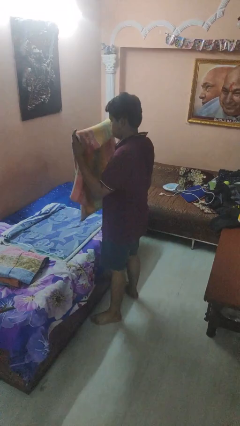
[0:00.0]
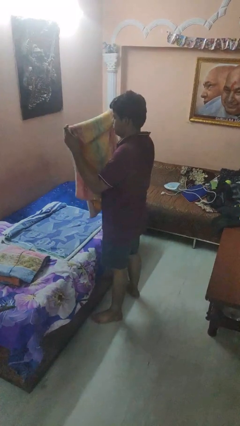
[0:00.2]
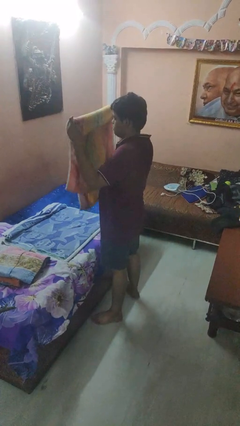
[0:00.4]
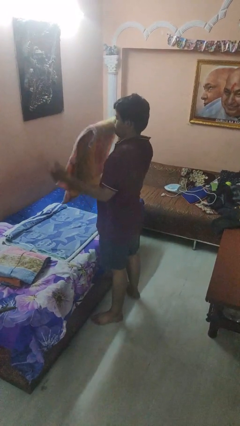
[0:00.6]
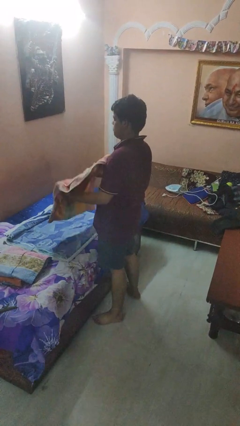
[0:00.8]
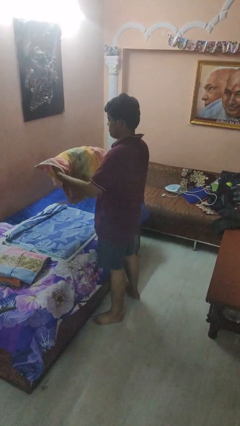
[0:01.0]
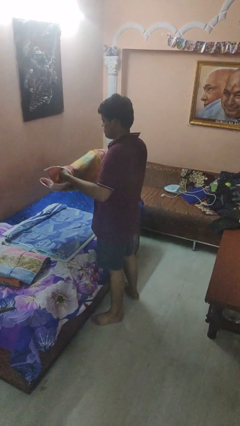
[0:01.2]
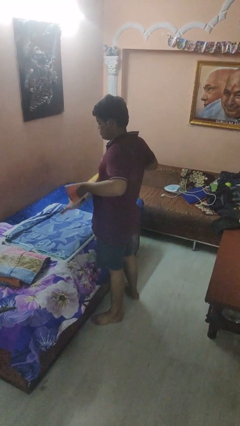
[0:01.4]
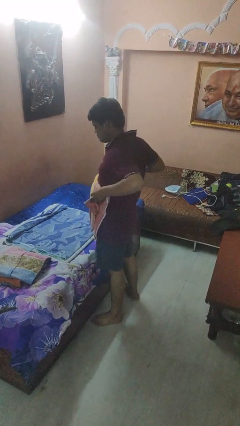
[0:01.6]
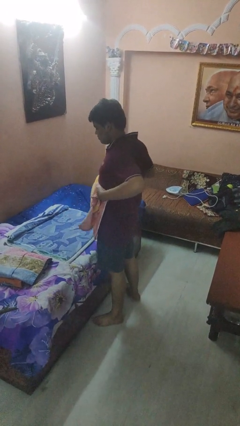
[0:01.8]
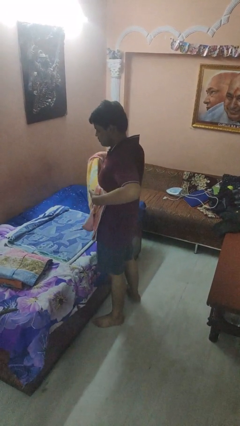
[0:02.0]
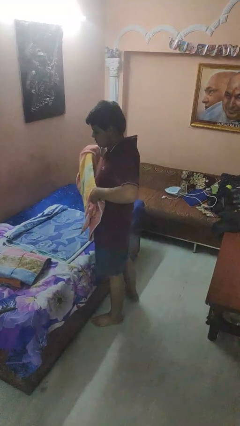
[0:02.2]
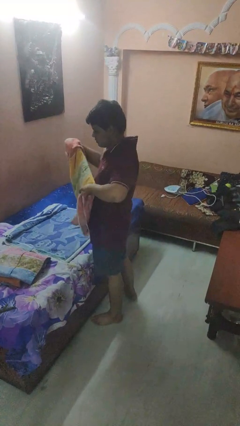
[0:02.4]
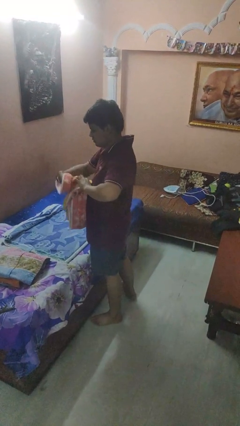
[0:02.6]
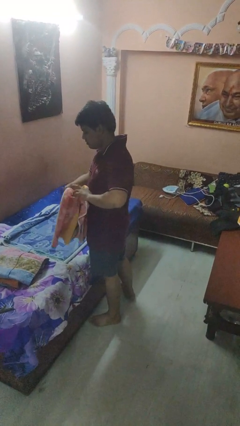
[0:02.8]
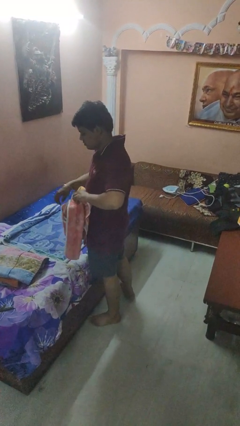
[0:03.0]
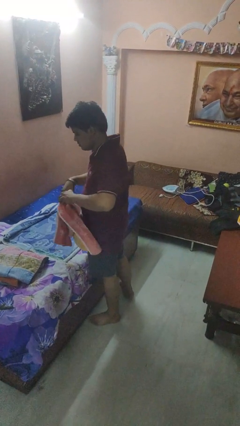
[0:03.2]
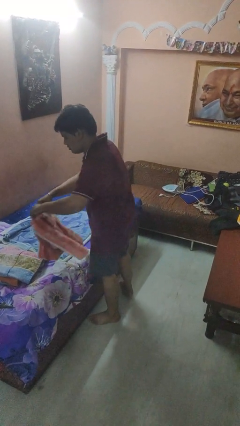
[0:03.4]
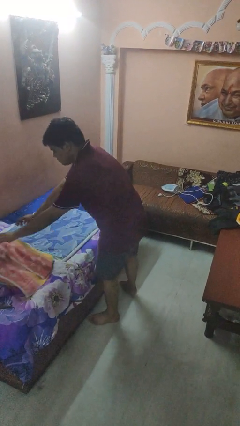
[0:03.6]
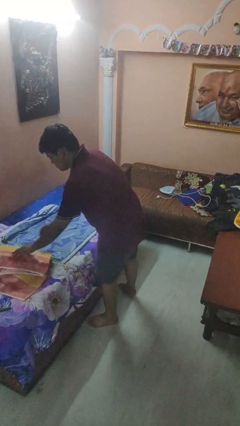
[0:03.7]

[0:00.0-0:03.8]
person folds towel

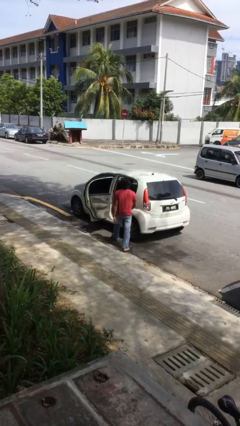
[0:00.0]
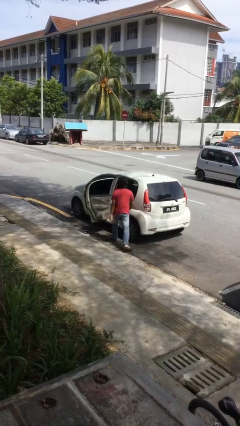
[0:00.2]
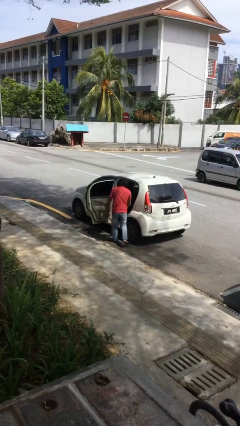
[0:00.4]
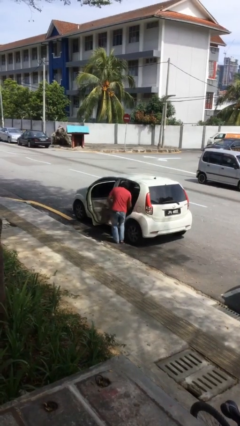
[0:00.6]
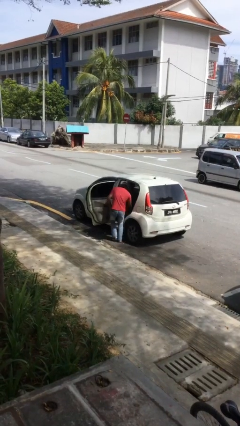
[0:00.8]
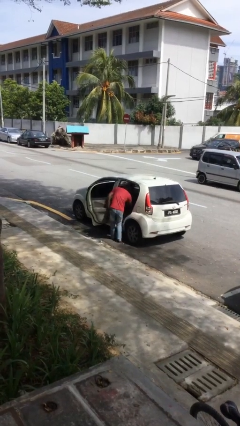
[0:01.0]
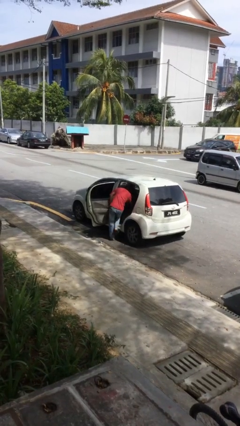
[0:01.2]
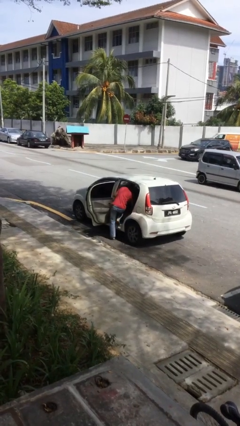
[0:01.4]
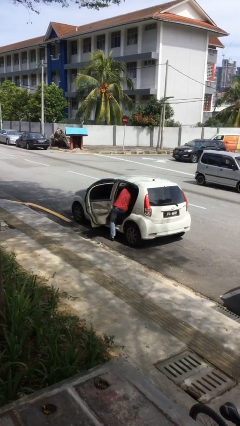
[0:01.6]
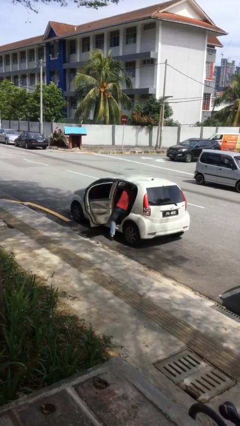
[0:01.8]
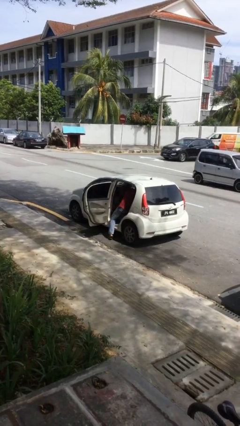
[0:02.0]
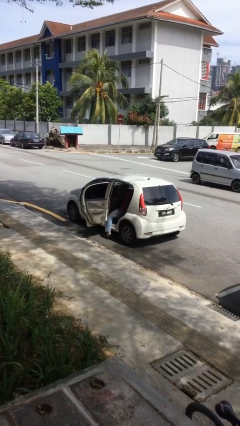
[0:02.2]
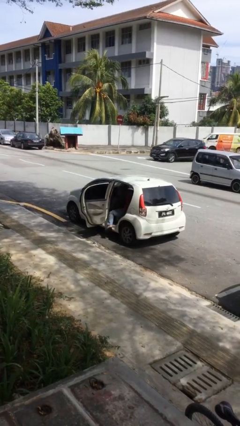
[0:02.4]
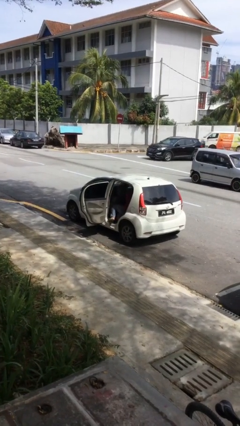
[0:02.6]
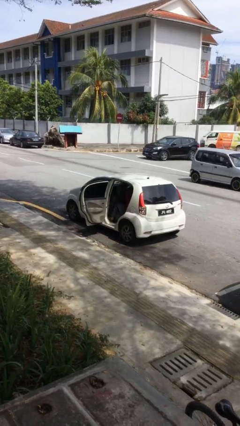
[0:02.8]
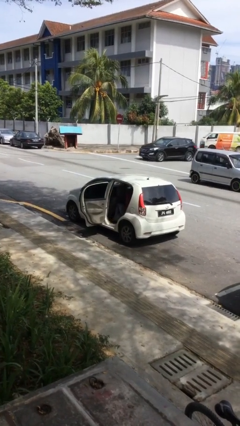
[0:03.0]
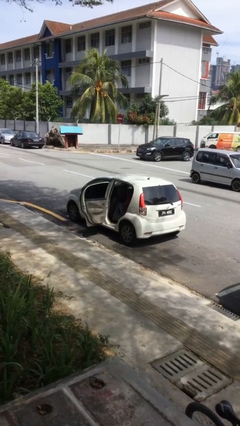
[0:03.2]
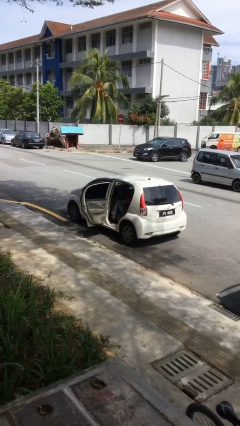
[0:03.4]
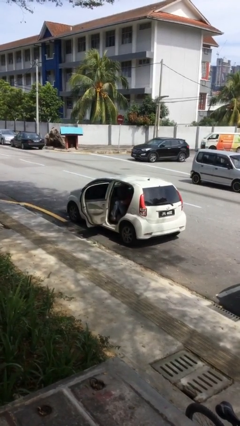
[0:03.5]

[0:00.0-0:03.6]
person enters car

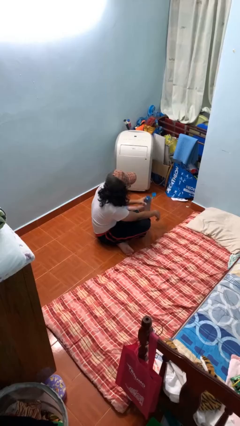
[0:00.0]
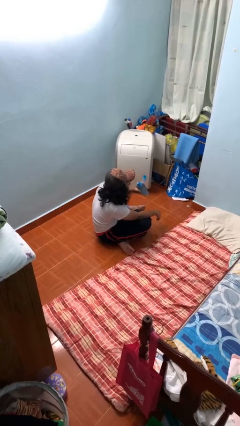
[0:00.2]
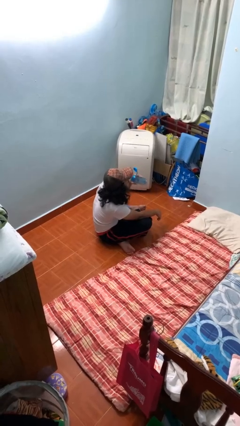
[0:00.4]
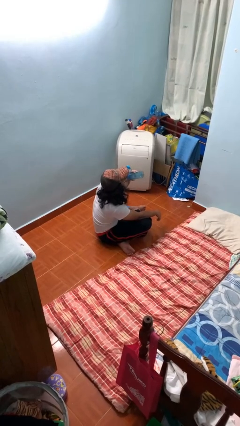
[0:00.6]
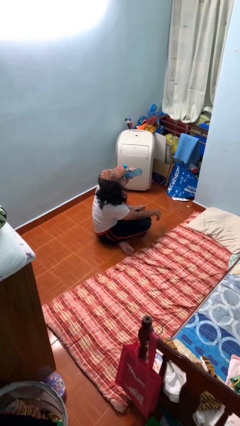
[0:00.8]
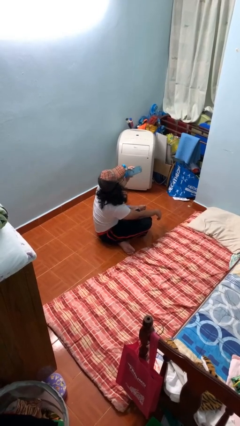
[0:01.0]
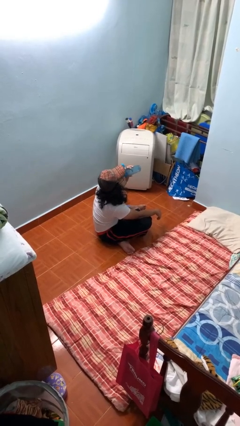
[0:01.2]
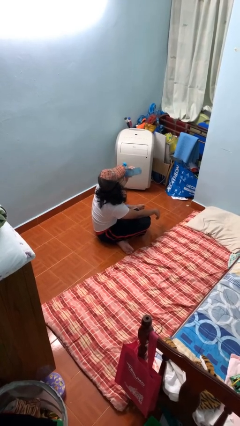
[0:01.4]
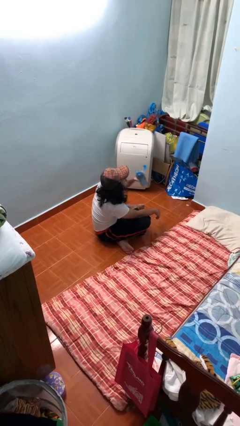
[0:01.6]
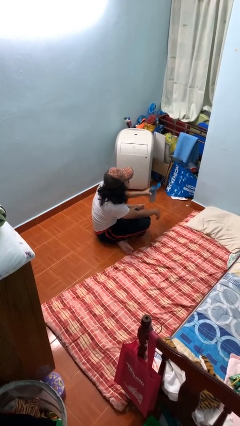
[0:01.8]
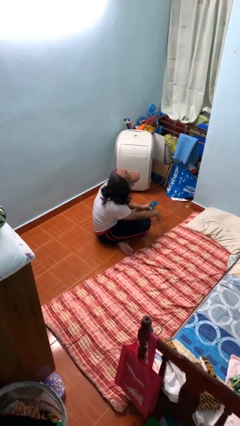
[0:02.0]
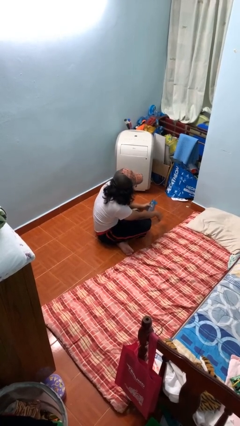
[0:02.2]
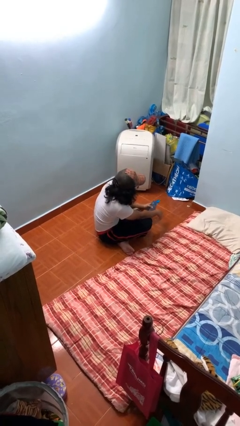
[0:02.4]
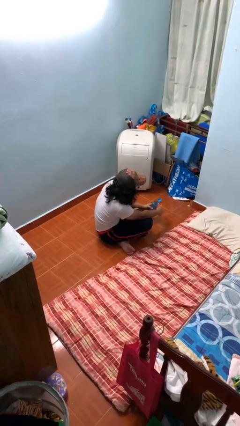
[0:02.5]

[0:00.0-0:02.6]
person drinks from bottle

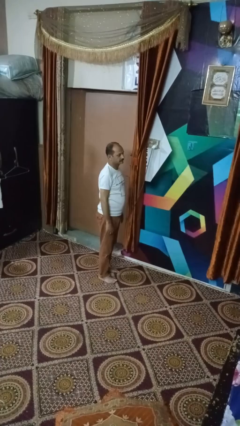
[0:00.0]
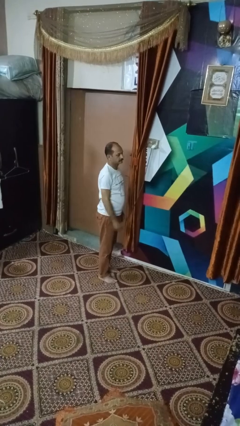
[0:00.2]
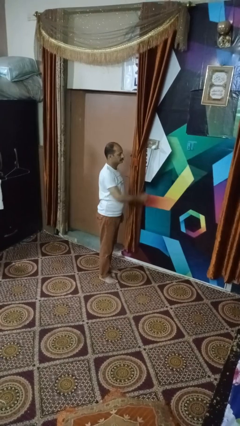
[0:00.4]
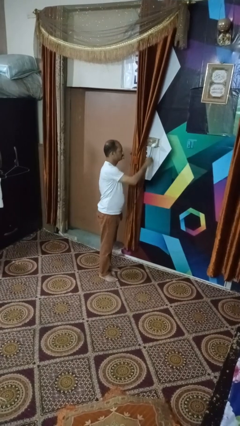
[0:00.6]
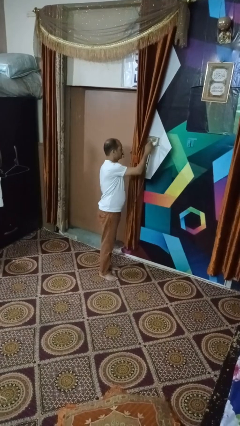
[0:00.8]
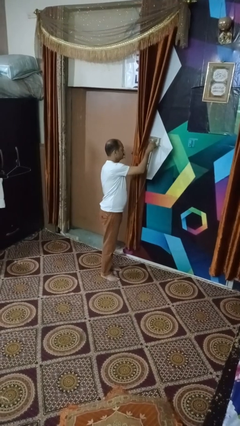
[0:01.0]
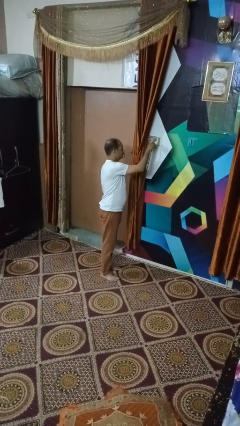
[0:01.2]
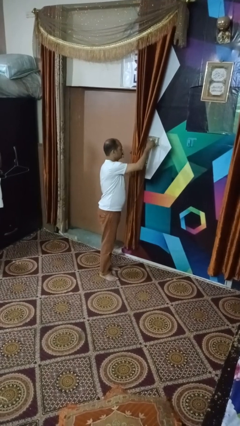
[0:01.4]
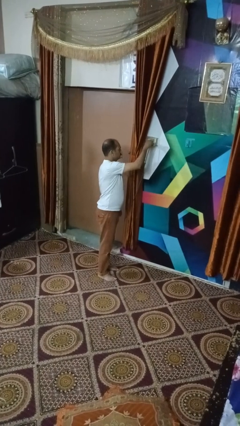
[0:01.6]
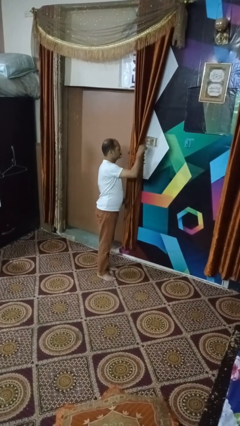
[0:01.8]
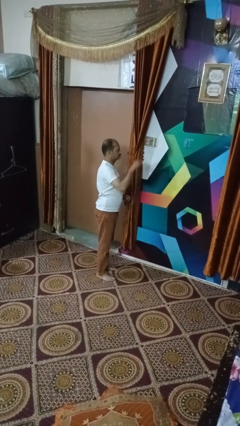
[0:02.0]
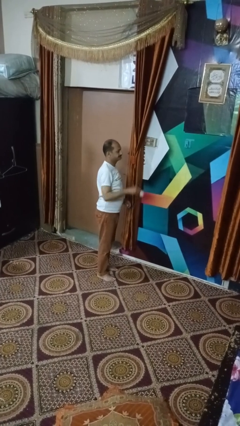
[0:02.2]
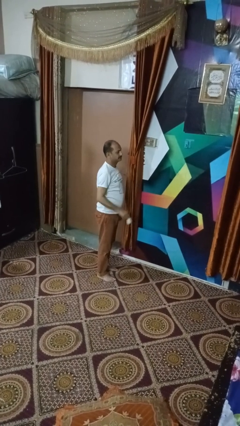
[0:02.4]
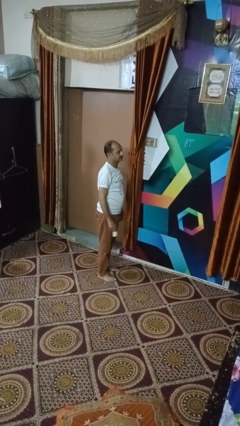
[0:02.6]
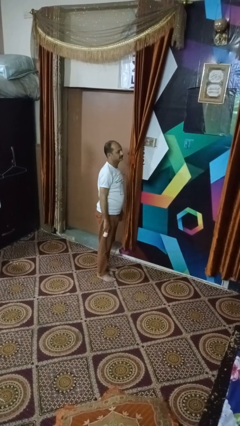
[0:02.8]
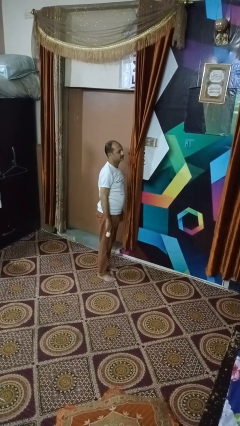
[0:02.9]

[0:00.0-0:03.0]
person unplugs from electrical socket

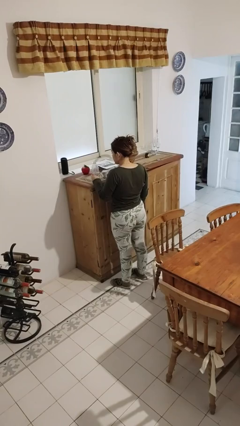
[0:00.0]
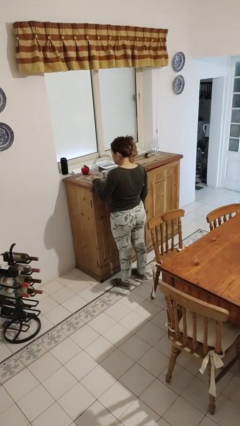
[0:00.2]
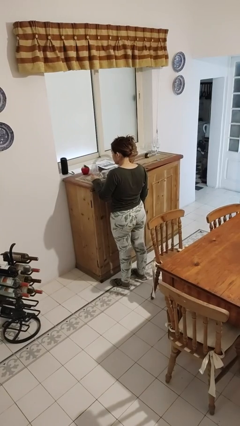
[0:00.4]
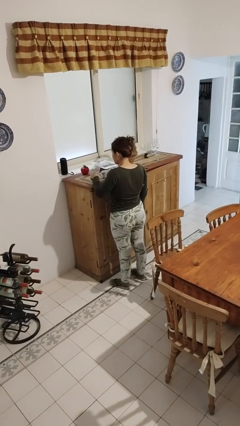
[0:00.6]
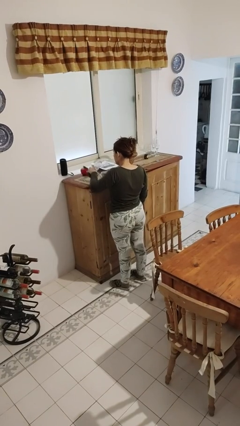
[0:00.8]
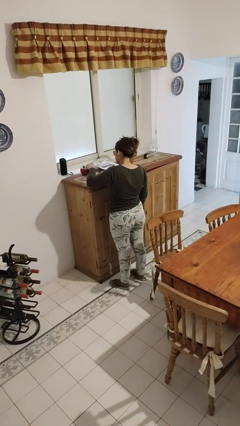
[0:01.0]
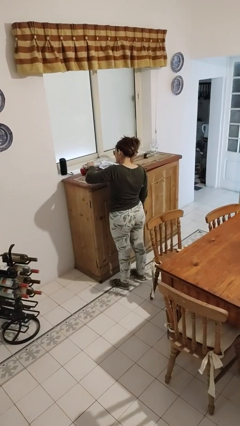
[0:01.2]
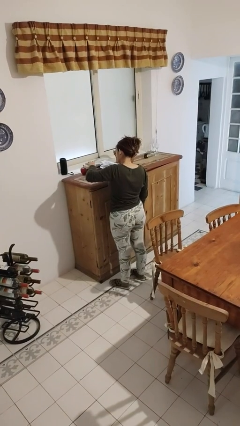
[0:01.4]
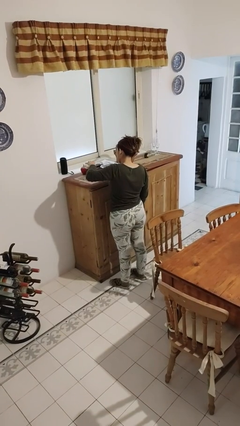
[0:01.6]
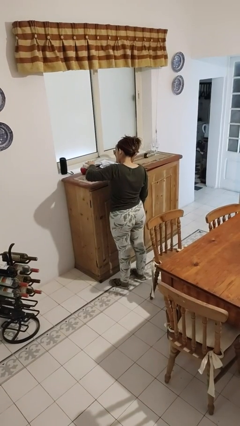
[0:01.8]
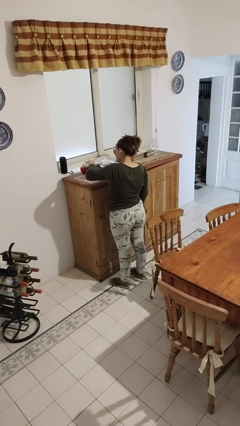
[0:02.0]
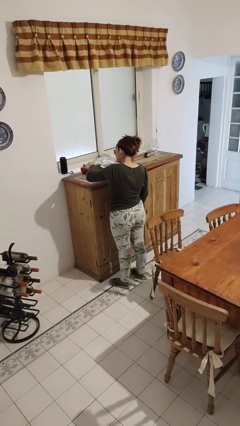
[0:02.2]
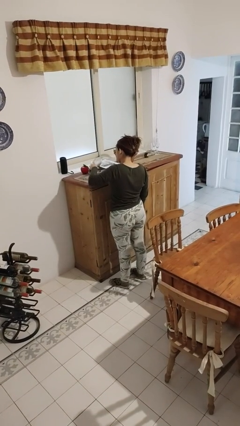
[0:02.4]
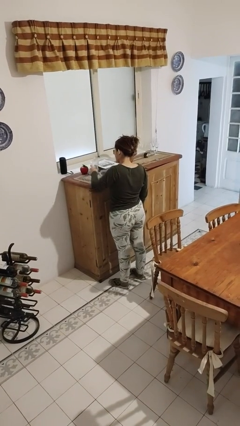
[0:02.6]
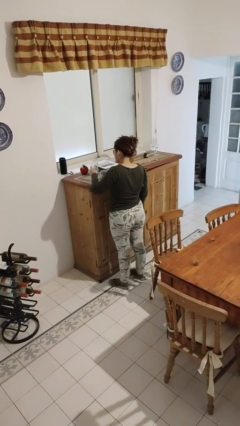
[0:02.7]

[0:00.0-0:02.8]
person pours liquid into cup

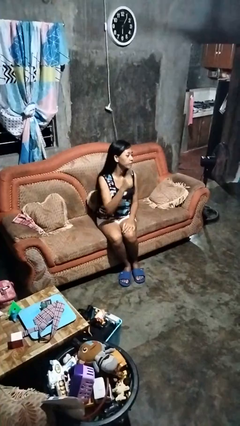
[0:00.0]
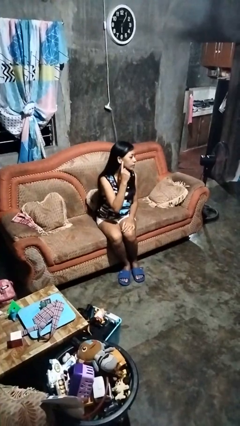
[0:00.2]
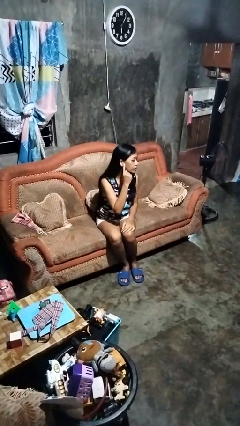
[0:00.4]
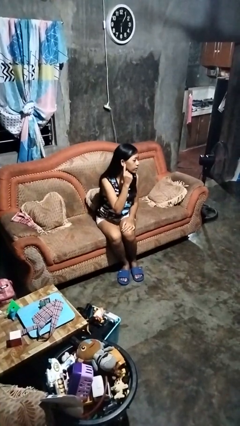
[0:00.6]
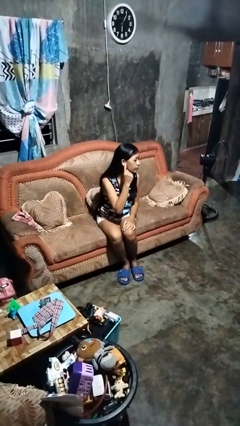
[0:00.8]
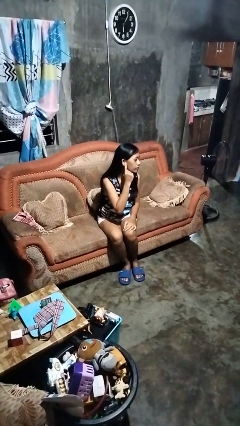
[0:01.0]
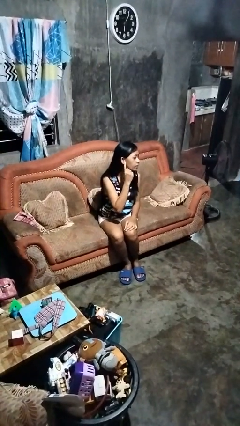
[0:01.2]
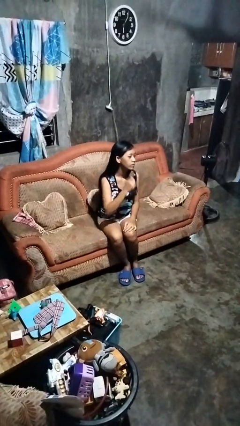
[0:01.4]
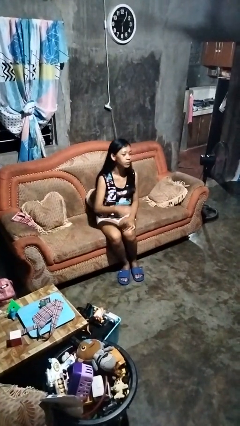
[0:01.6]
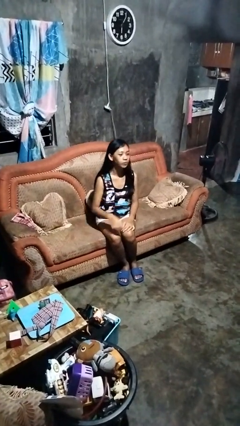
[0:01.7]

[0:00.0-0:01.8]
person gestures listen closely
